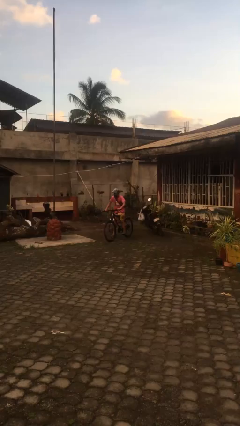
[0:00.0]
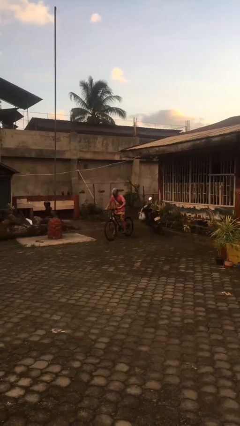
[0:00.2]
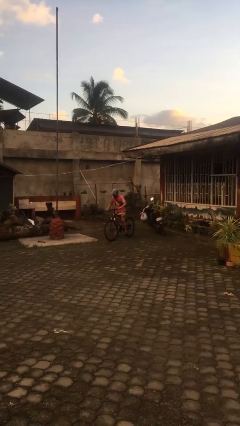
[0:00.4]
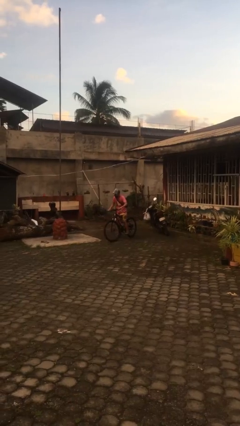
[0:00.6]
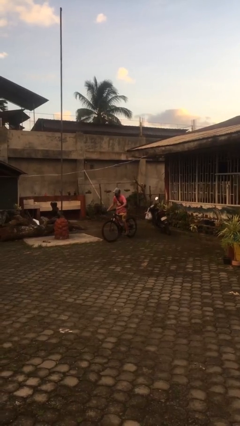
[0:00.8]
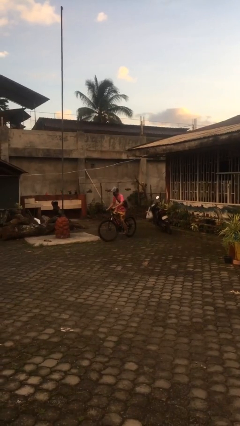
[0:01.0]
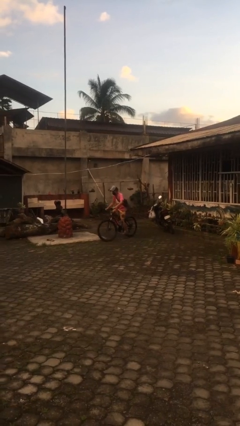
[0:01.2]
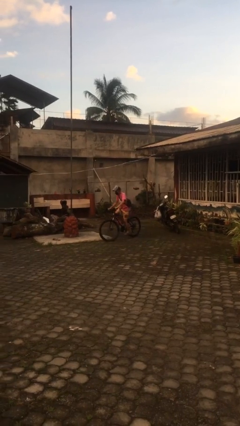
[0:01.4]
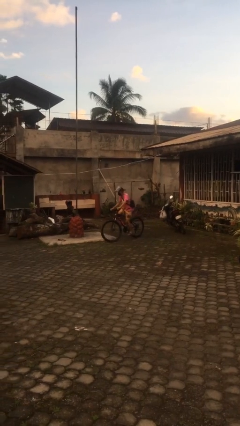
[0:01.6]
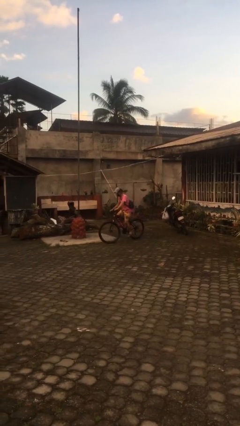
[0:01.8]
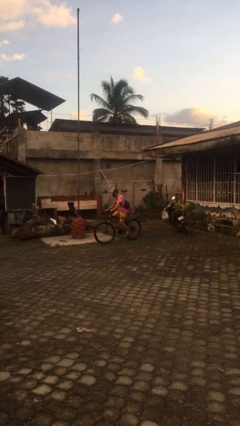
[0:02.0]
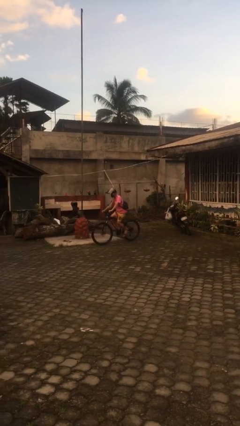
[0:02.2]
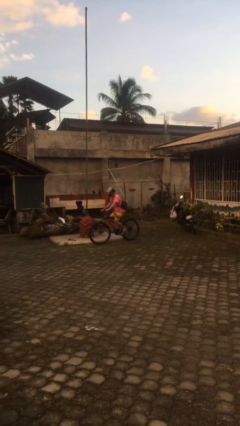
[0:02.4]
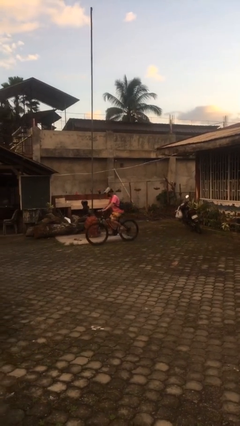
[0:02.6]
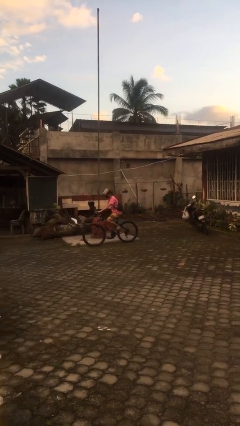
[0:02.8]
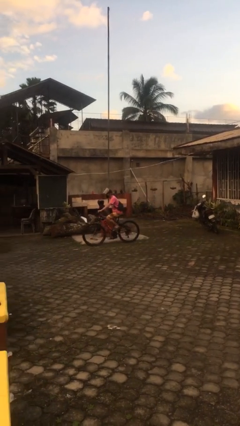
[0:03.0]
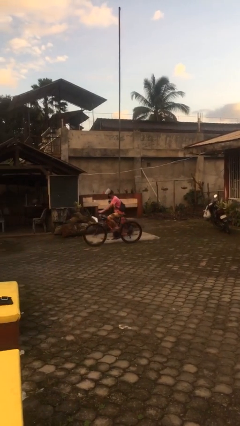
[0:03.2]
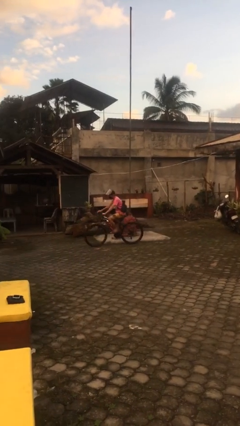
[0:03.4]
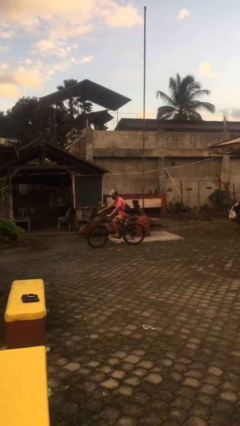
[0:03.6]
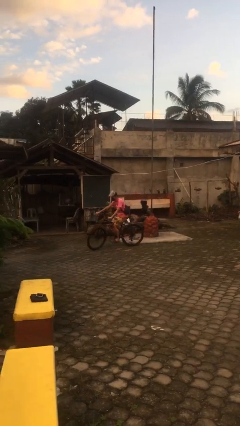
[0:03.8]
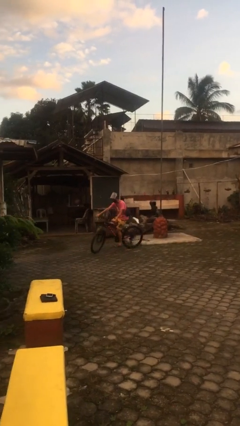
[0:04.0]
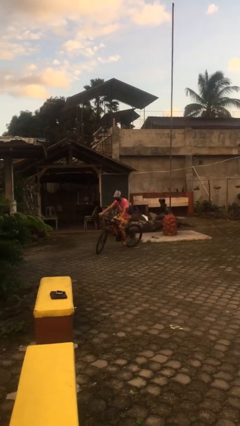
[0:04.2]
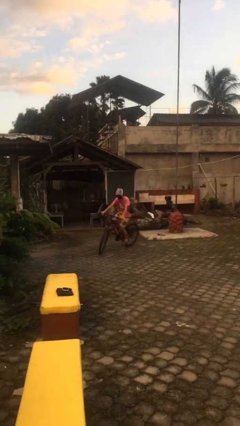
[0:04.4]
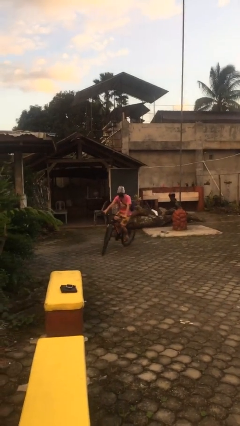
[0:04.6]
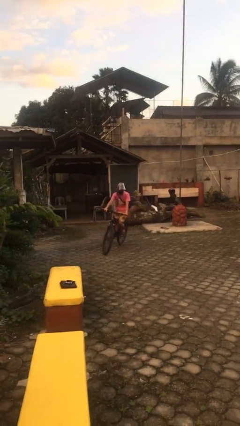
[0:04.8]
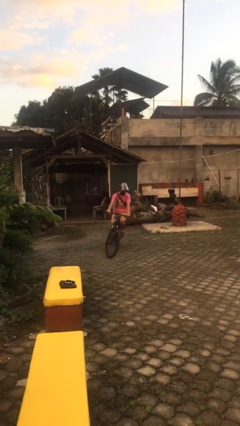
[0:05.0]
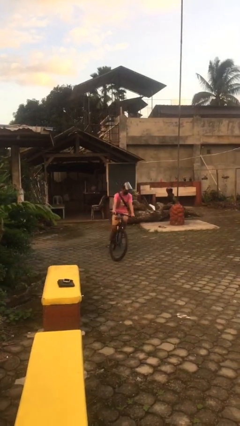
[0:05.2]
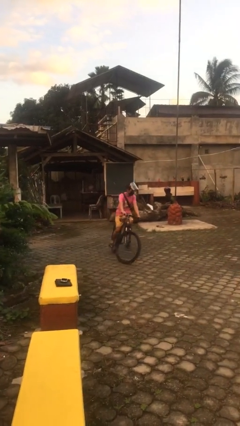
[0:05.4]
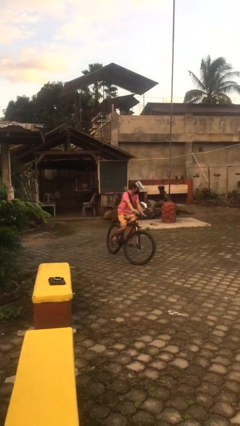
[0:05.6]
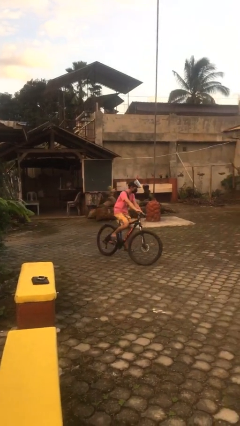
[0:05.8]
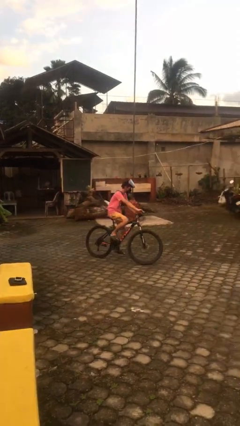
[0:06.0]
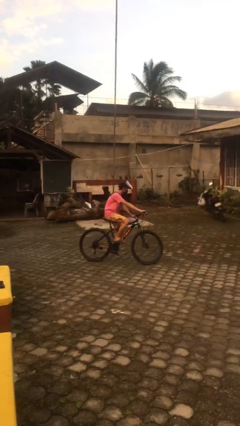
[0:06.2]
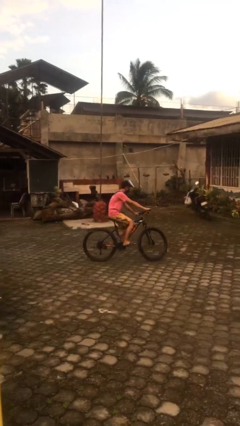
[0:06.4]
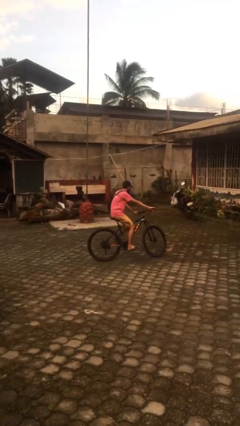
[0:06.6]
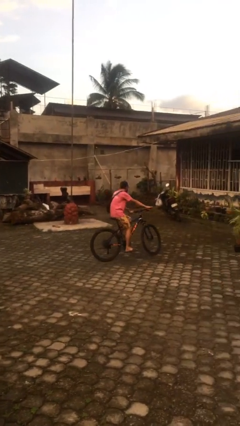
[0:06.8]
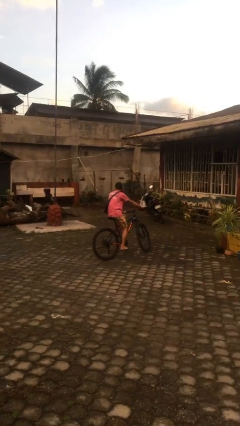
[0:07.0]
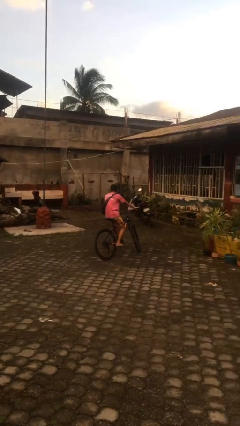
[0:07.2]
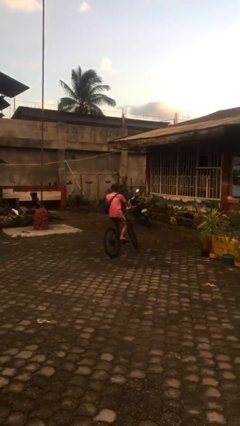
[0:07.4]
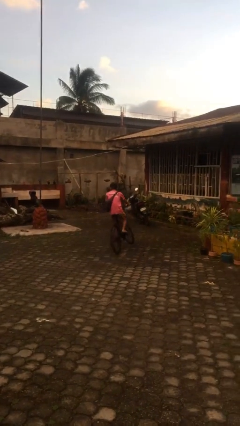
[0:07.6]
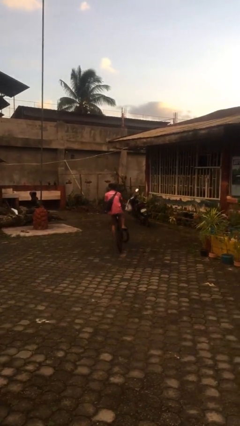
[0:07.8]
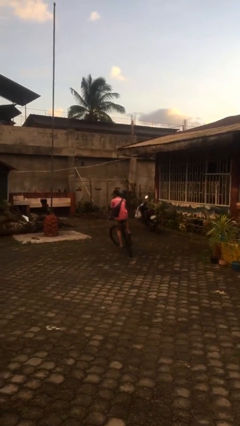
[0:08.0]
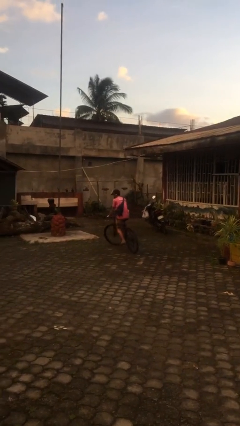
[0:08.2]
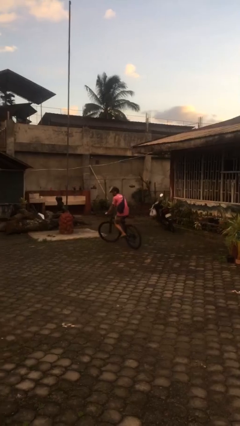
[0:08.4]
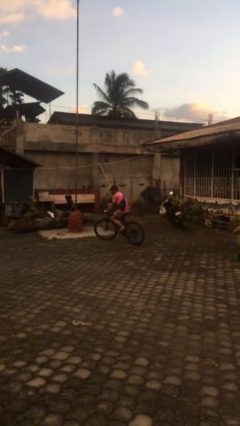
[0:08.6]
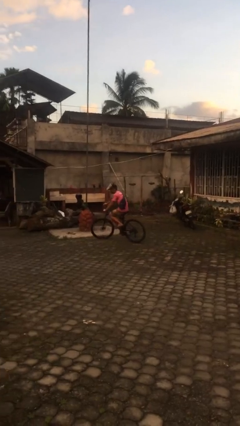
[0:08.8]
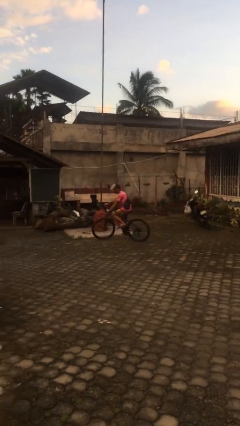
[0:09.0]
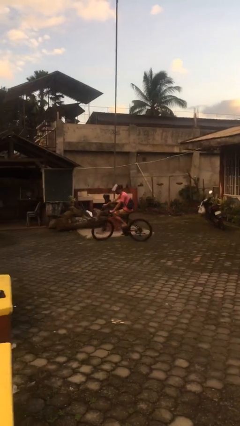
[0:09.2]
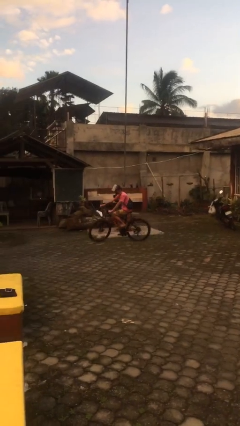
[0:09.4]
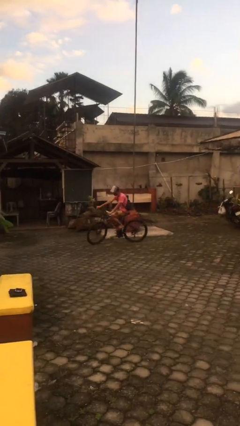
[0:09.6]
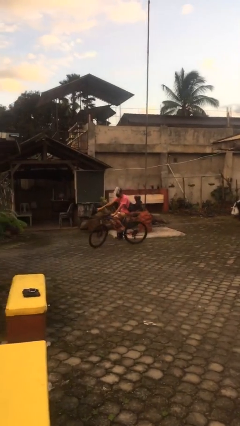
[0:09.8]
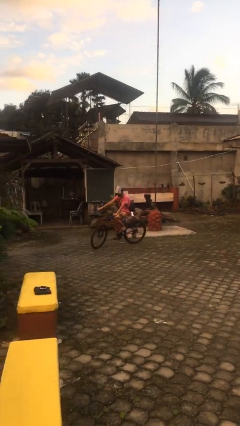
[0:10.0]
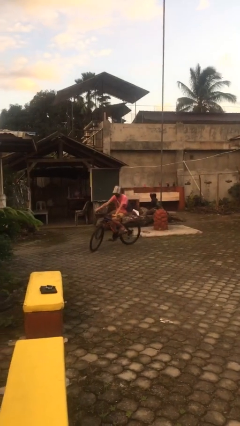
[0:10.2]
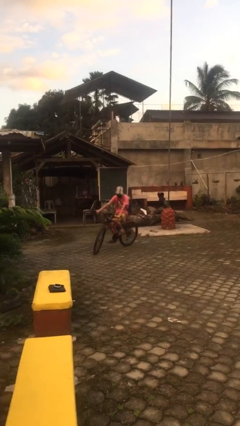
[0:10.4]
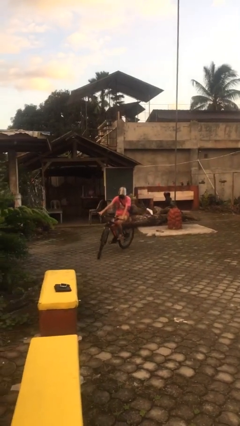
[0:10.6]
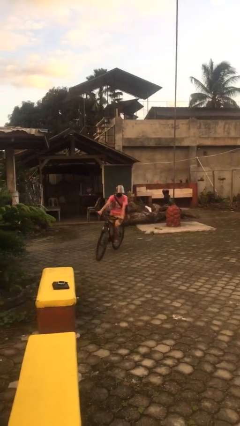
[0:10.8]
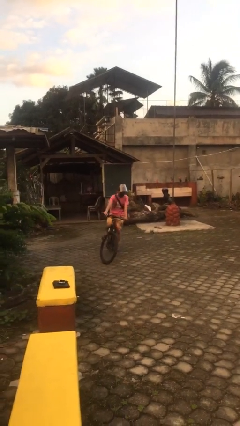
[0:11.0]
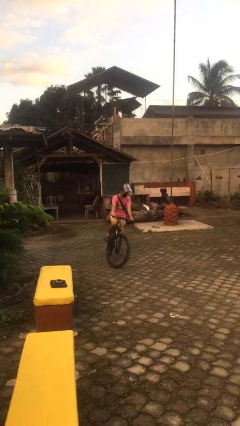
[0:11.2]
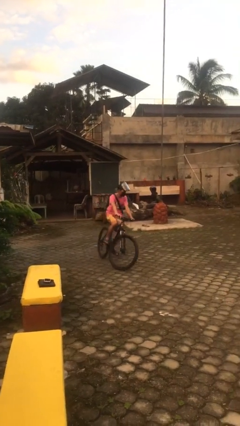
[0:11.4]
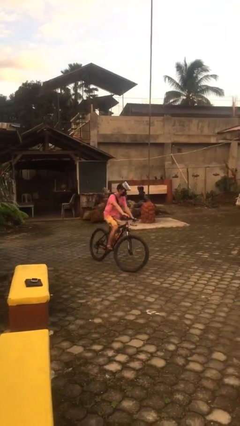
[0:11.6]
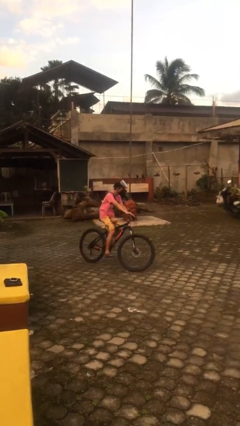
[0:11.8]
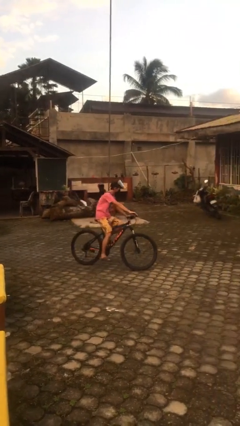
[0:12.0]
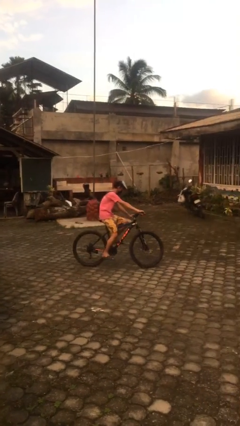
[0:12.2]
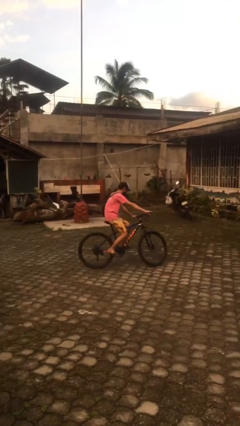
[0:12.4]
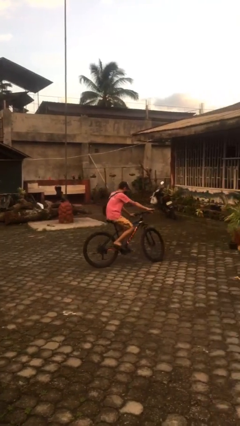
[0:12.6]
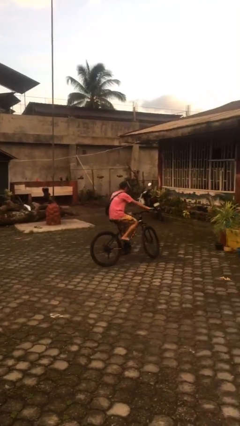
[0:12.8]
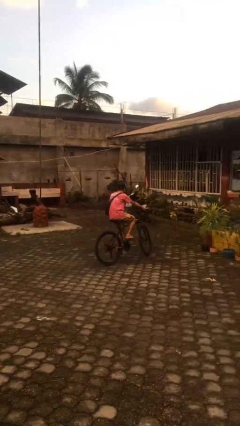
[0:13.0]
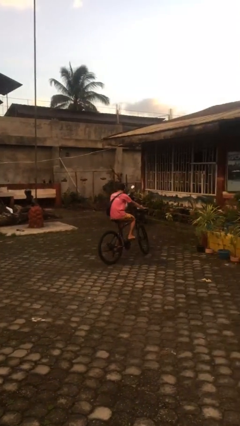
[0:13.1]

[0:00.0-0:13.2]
person rides bicycle

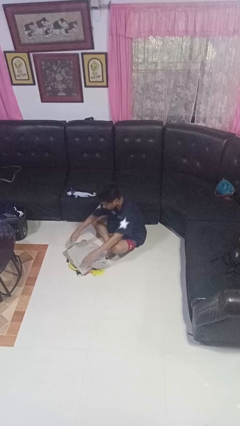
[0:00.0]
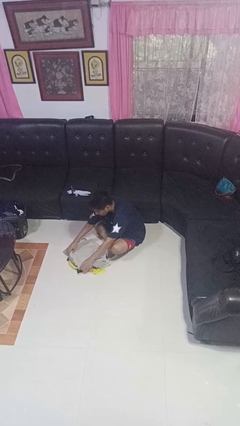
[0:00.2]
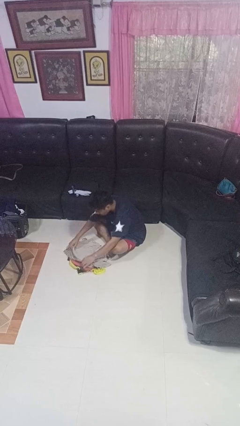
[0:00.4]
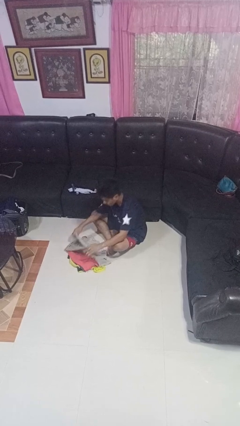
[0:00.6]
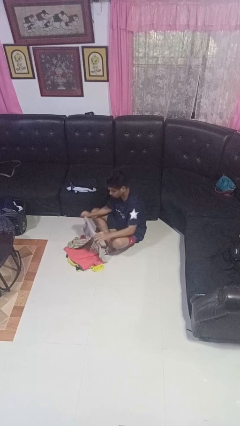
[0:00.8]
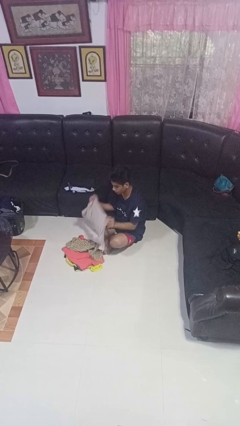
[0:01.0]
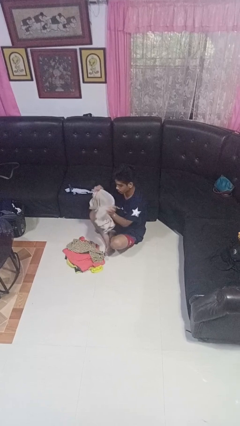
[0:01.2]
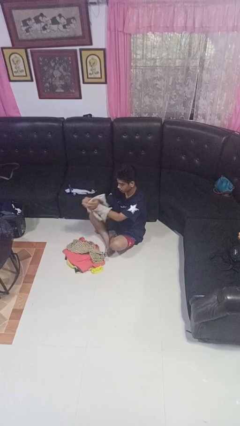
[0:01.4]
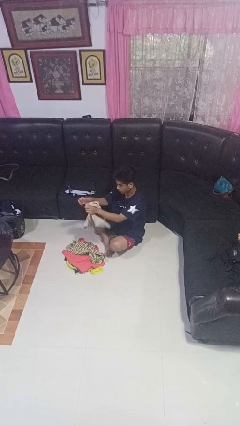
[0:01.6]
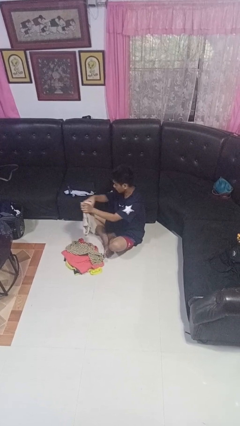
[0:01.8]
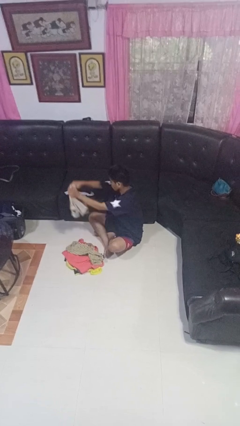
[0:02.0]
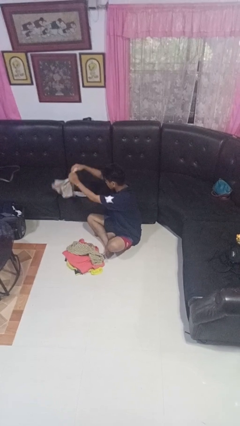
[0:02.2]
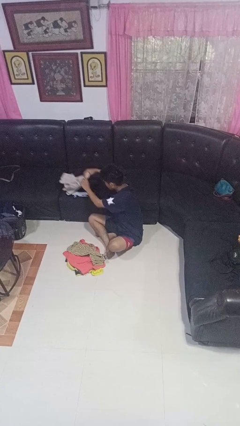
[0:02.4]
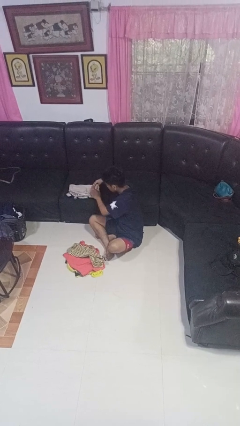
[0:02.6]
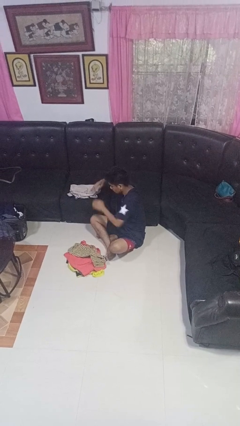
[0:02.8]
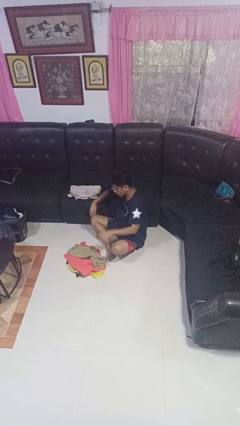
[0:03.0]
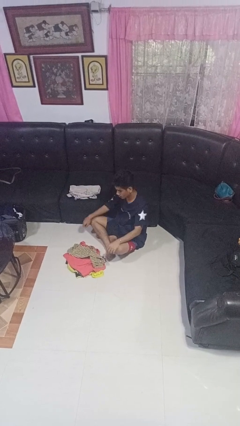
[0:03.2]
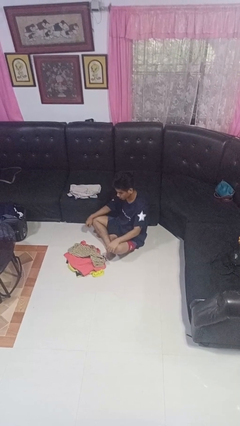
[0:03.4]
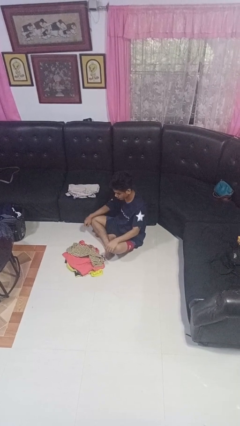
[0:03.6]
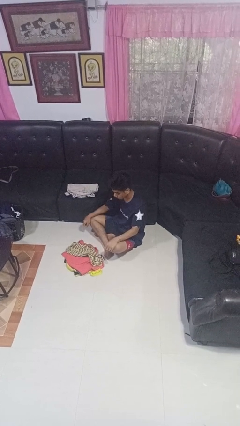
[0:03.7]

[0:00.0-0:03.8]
person folds shirt

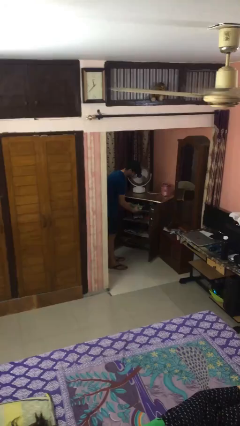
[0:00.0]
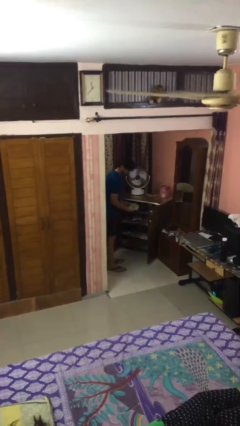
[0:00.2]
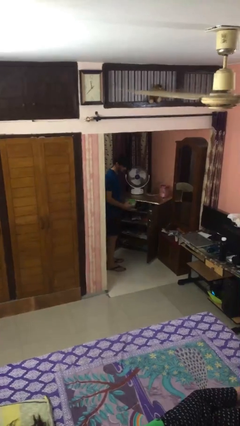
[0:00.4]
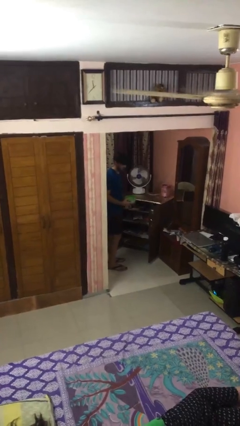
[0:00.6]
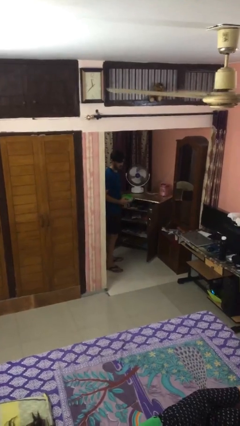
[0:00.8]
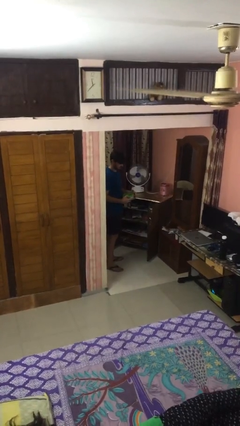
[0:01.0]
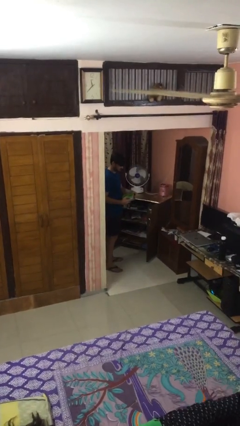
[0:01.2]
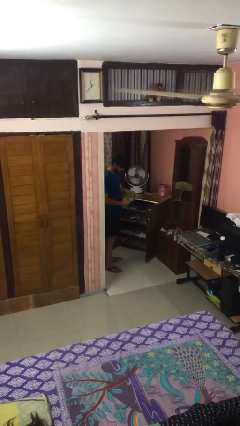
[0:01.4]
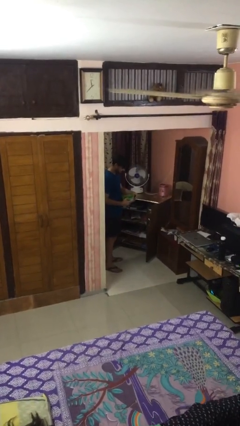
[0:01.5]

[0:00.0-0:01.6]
person picks up object from cabinet
